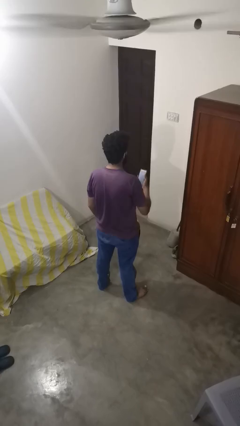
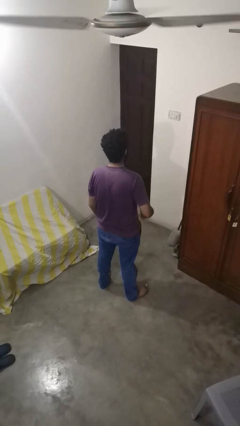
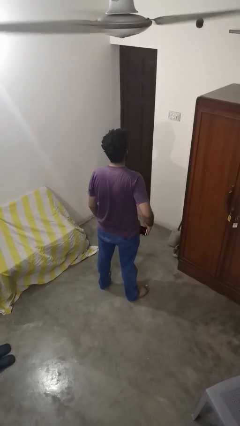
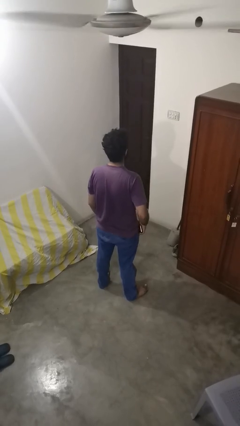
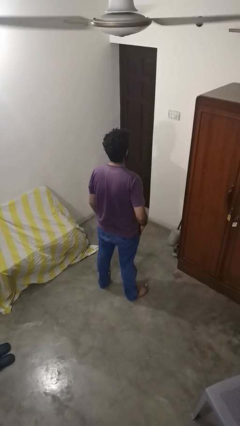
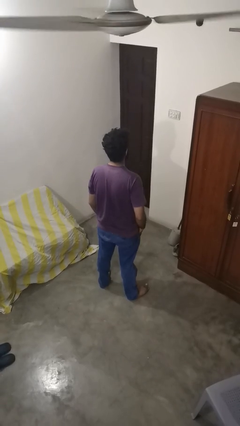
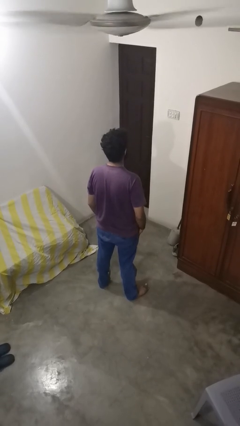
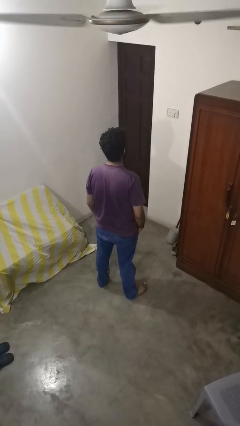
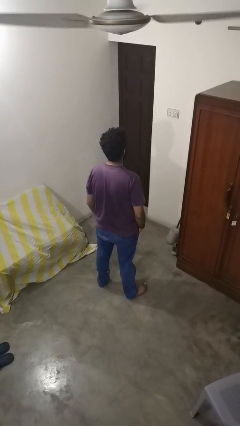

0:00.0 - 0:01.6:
person puts phone into pocket

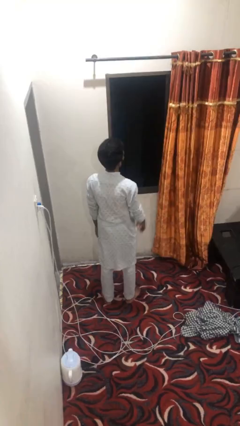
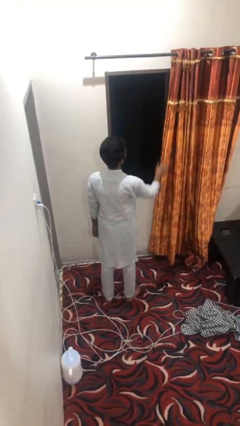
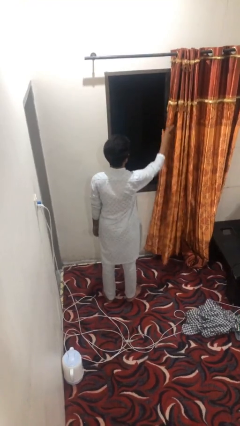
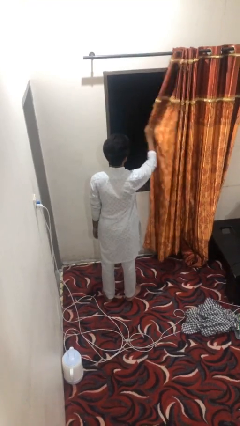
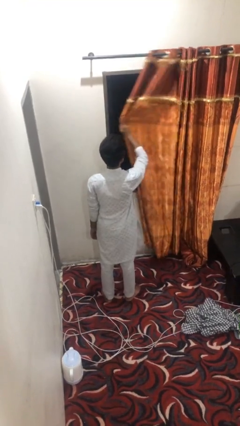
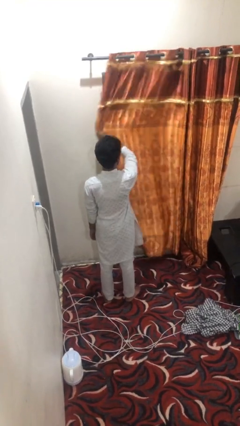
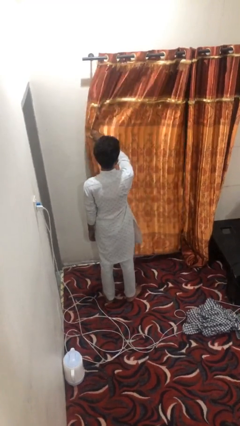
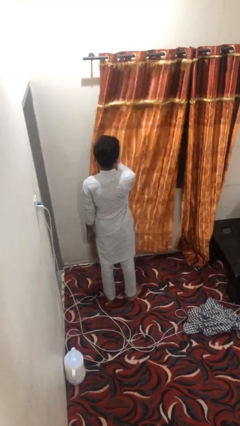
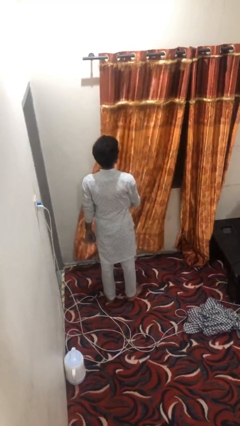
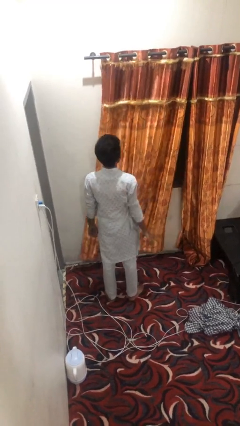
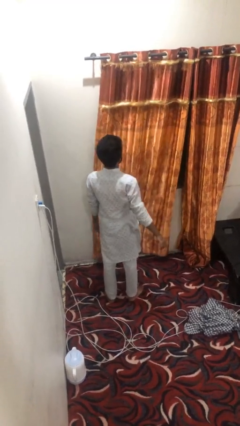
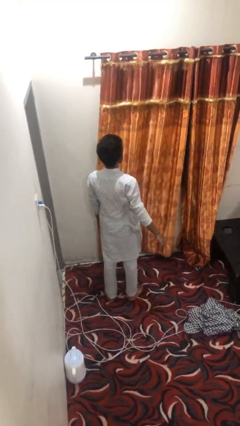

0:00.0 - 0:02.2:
person closes curtains

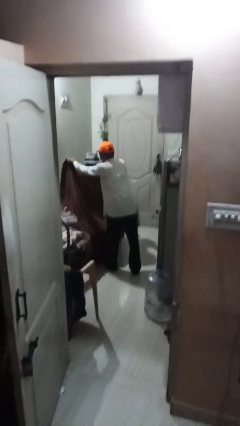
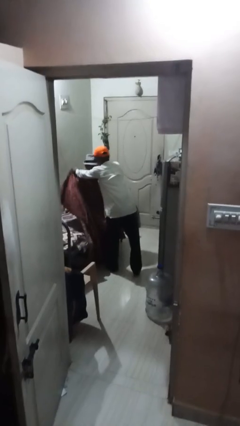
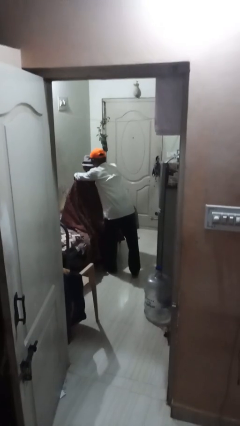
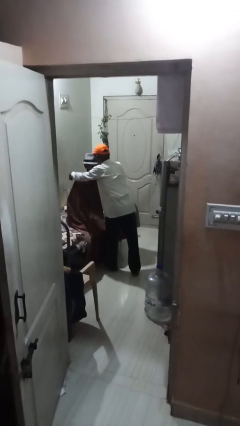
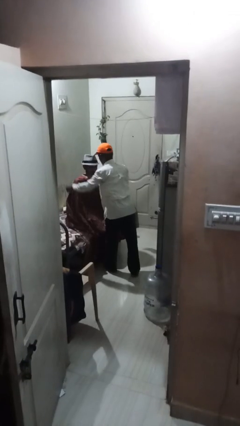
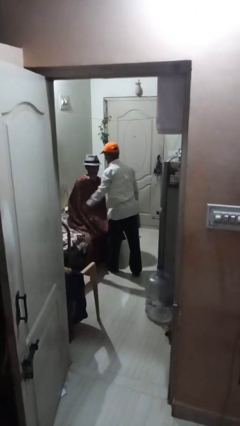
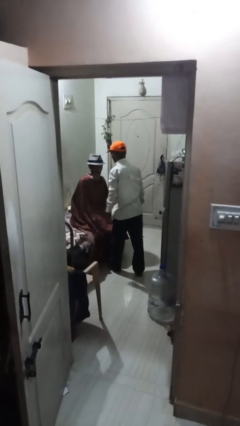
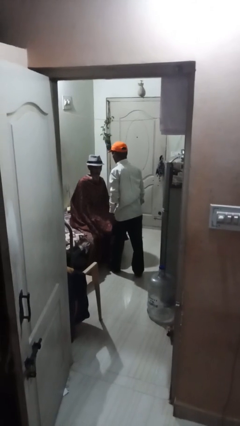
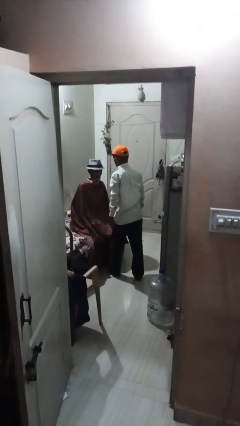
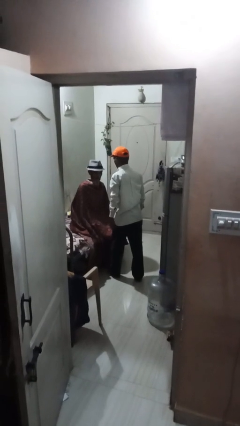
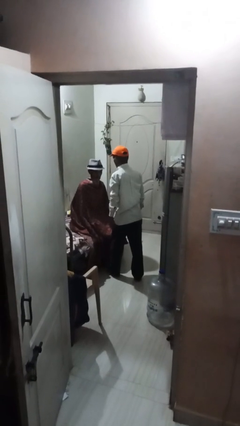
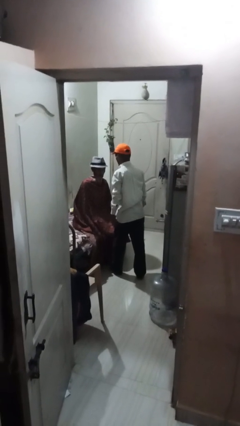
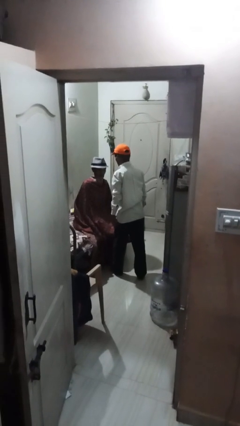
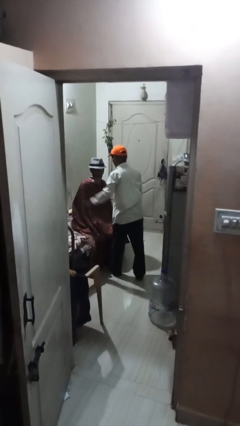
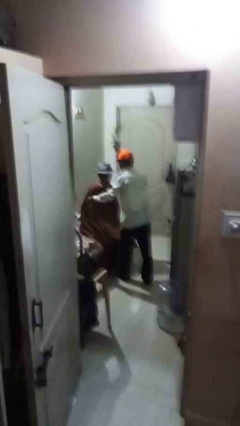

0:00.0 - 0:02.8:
person covers friend with blanket

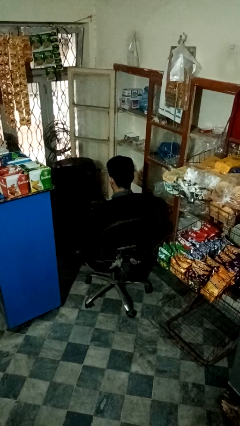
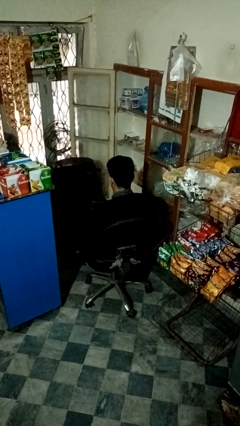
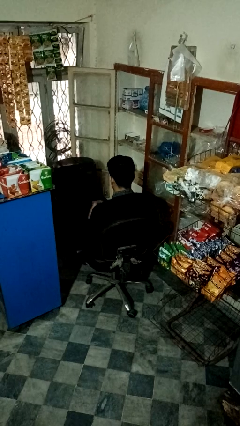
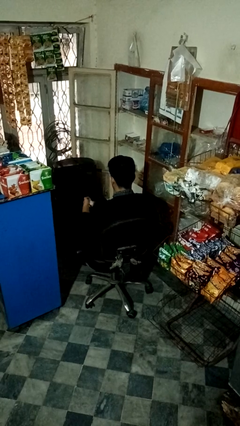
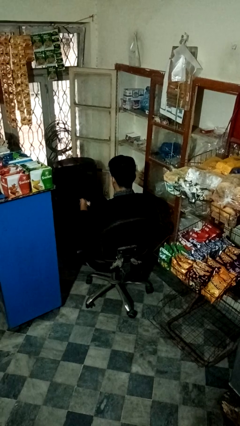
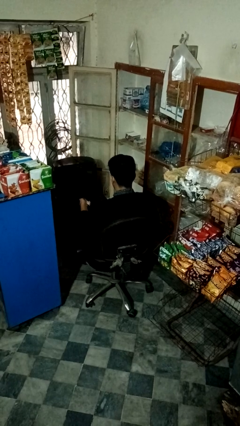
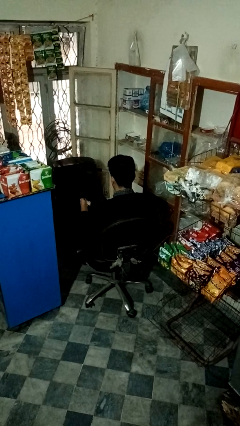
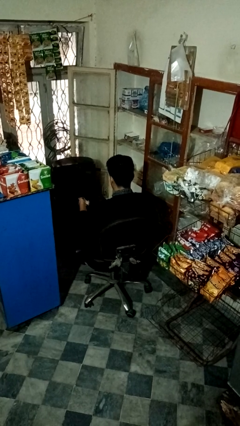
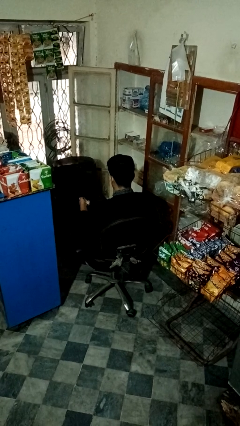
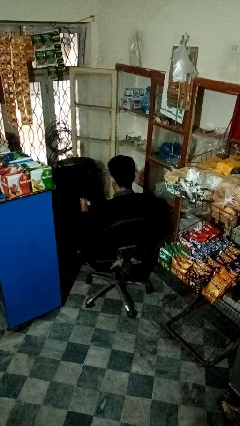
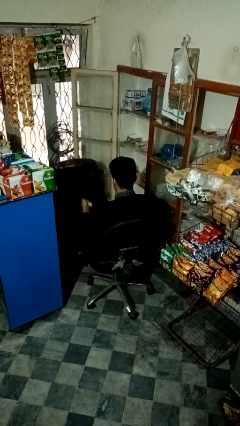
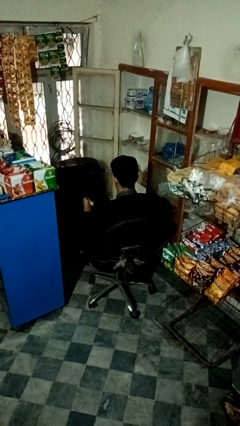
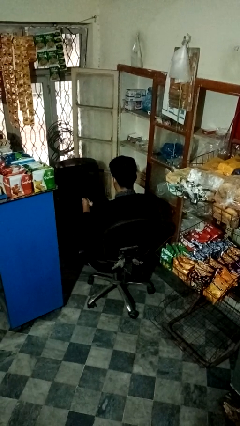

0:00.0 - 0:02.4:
person uses television remote

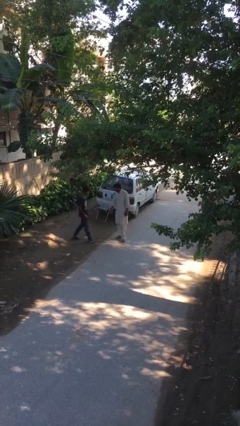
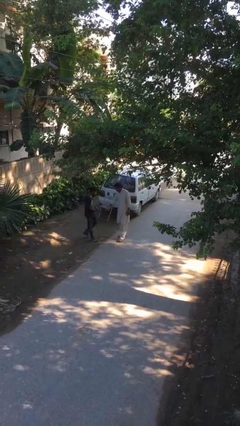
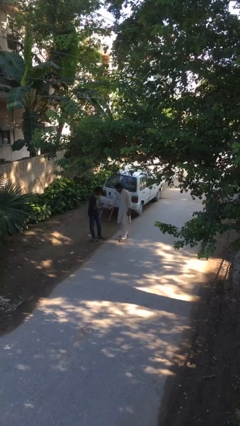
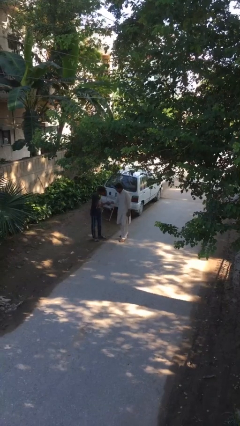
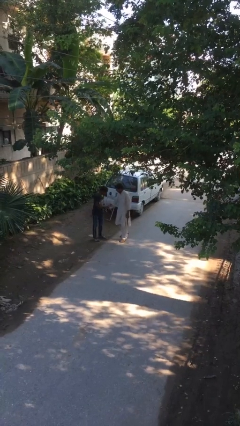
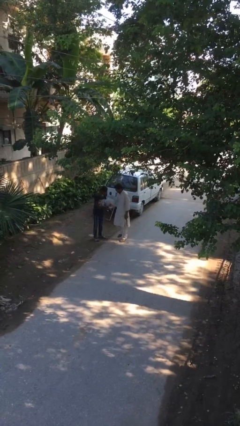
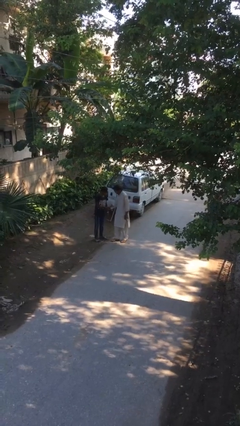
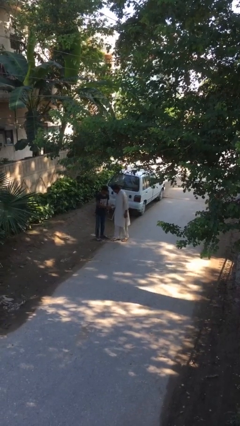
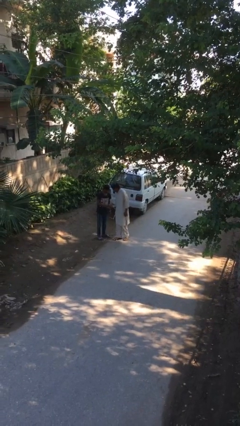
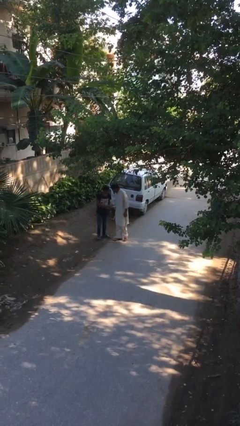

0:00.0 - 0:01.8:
person shakes hand

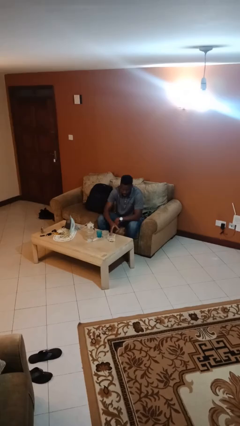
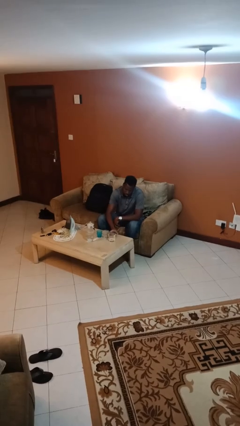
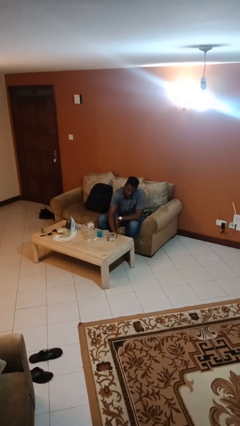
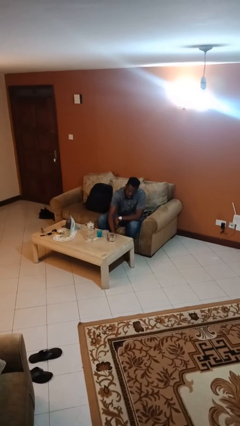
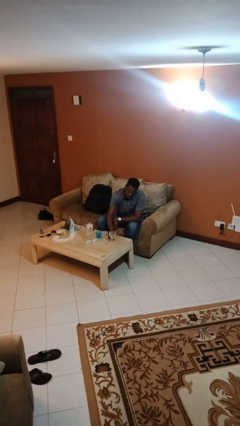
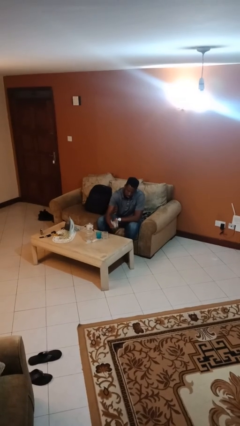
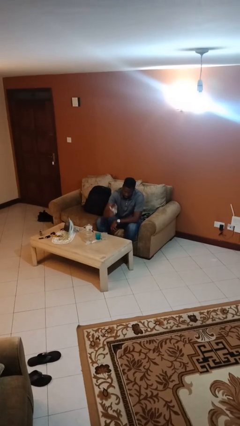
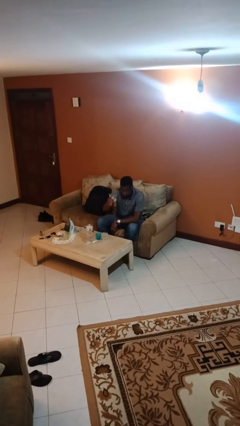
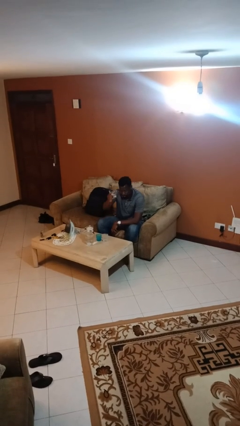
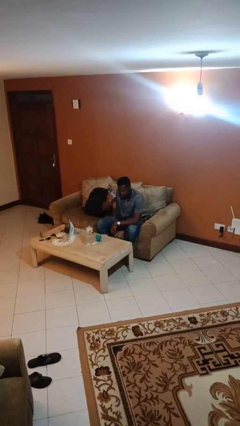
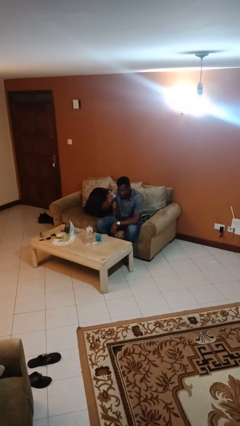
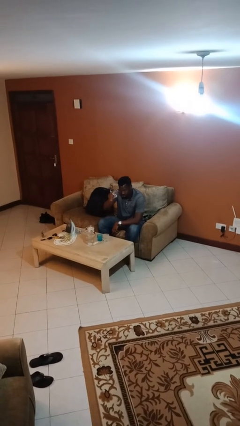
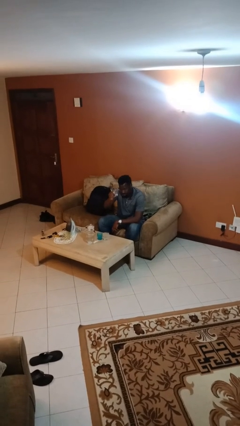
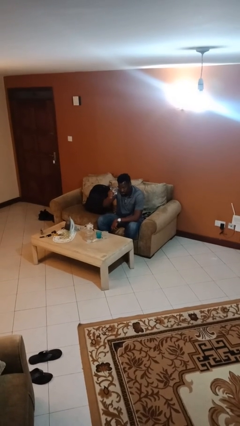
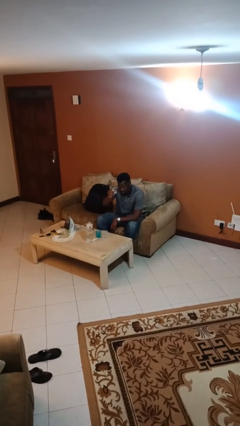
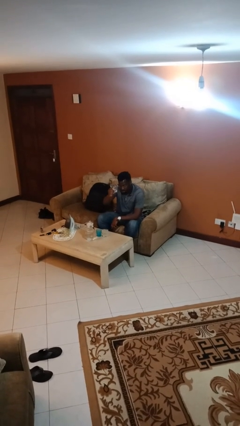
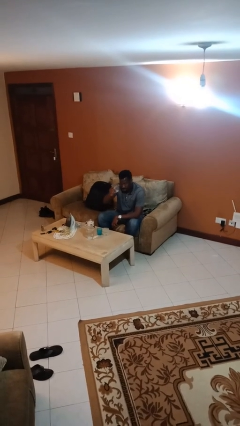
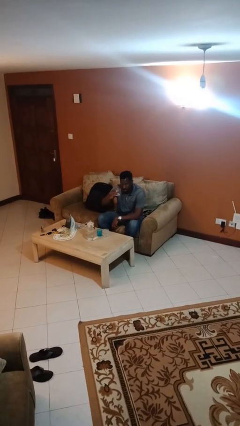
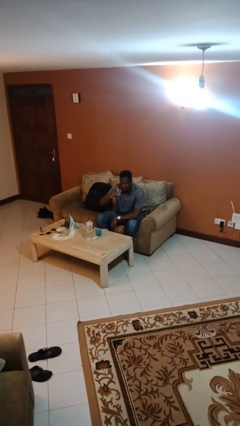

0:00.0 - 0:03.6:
person picks up object from table

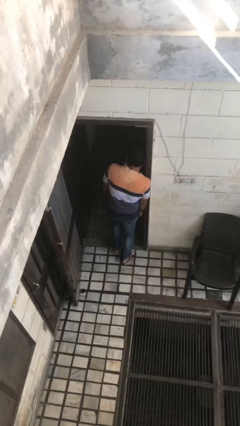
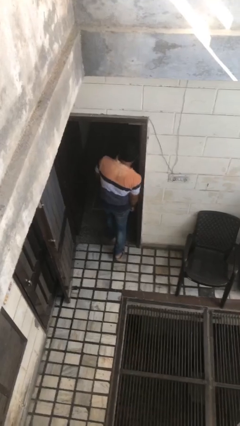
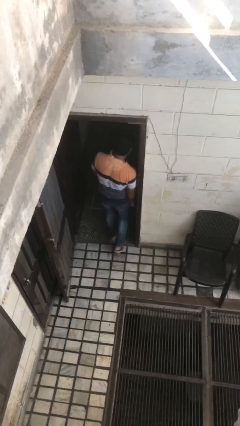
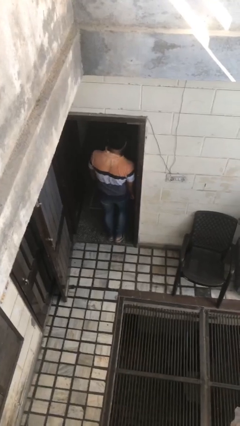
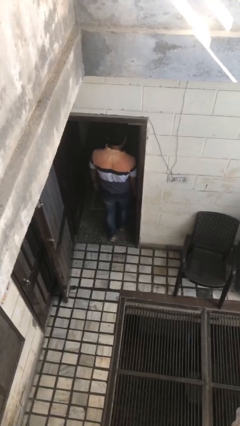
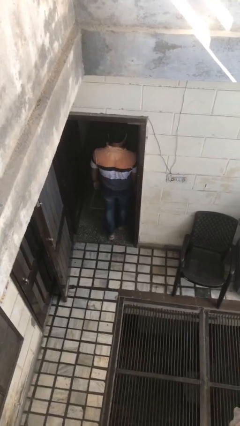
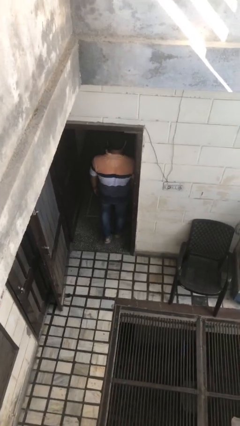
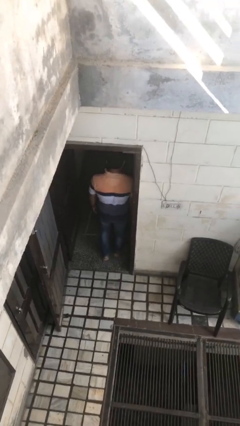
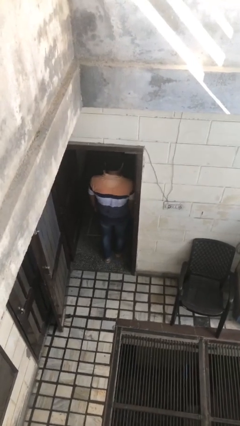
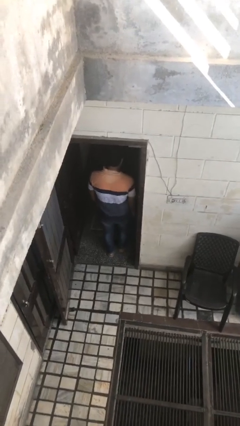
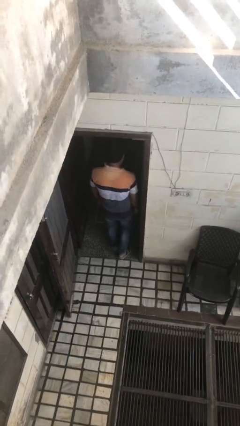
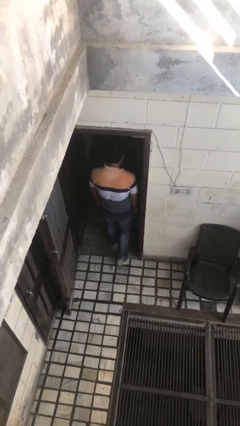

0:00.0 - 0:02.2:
person bumps into wall
